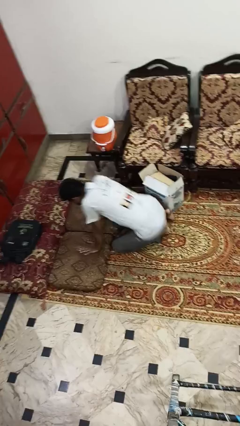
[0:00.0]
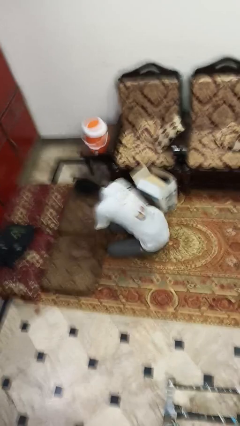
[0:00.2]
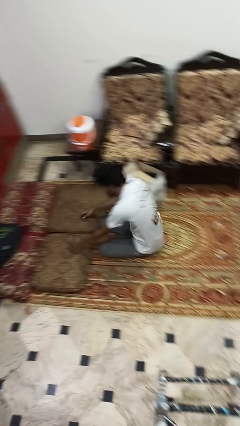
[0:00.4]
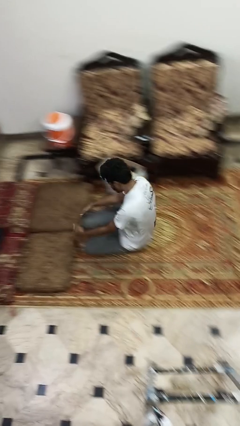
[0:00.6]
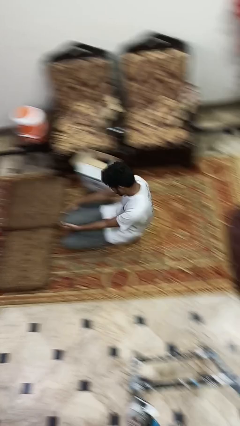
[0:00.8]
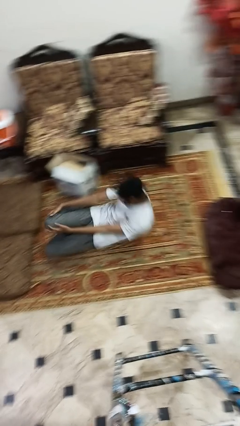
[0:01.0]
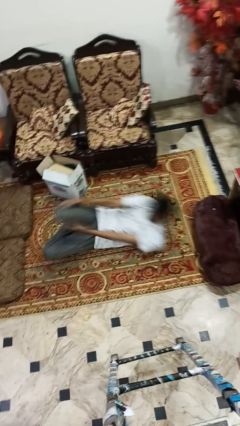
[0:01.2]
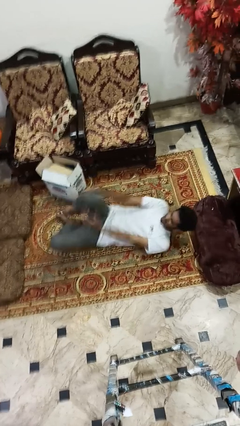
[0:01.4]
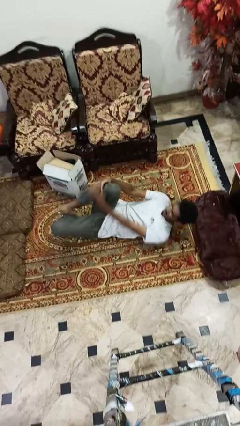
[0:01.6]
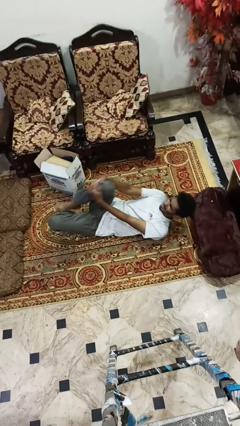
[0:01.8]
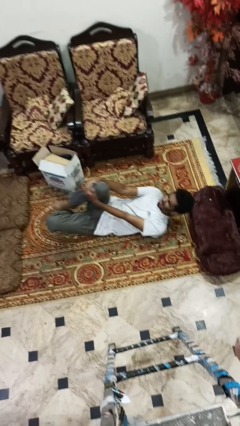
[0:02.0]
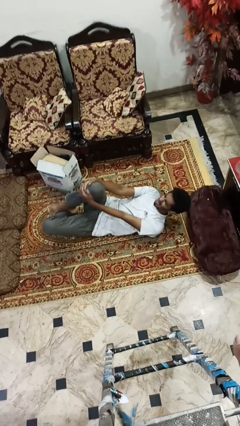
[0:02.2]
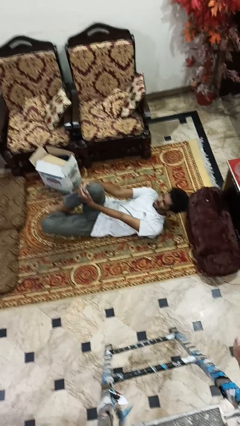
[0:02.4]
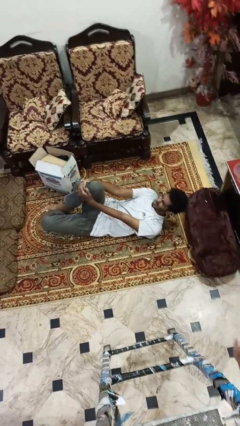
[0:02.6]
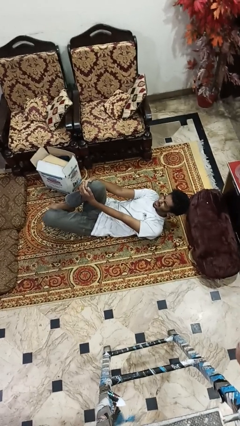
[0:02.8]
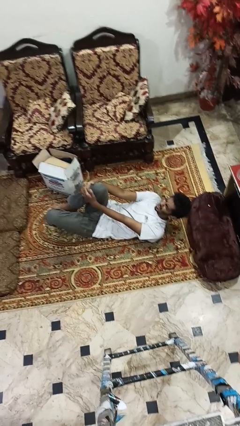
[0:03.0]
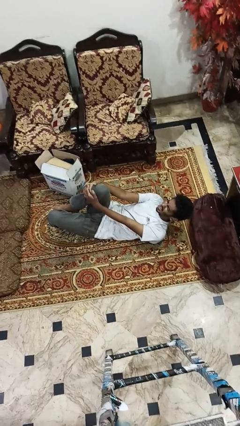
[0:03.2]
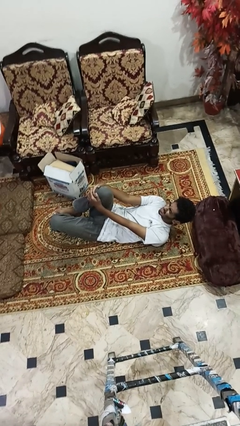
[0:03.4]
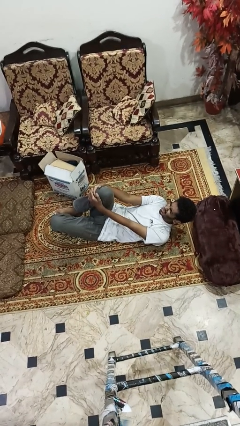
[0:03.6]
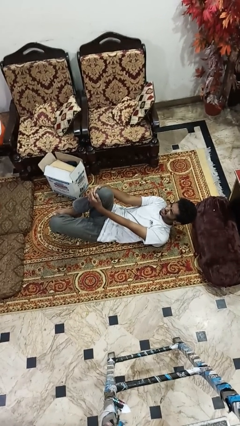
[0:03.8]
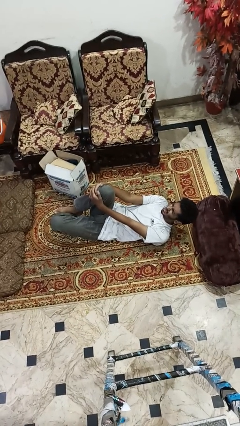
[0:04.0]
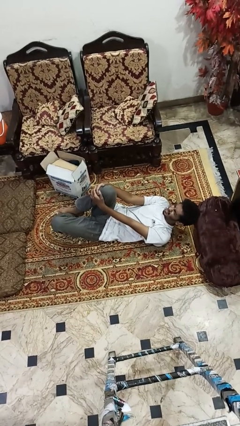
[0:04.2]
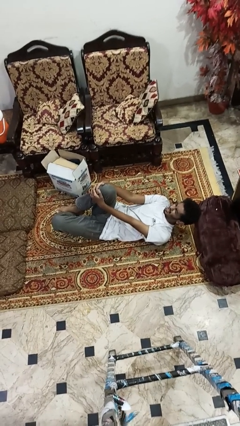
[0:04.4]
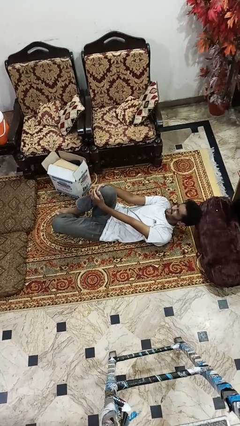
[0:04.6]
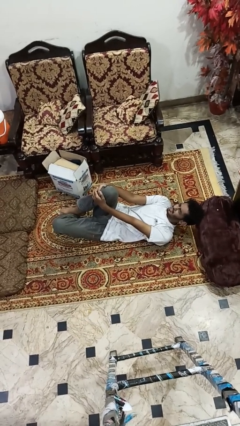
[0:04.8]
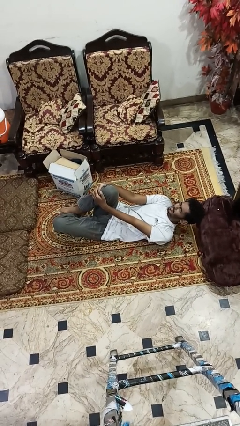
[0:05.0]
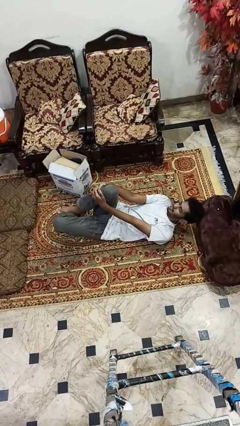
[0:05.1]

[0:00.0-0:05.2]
person lies down on floor

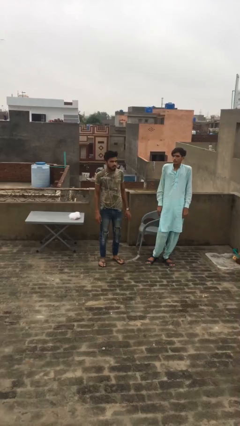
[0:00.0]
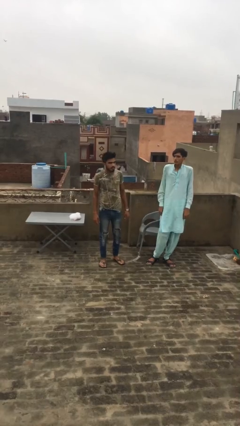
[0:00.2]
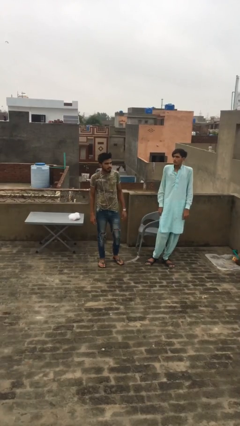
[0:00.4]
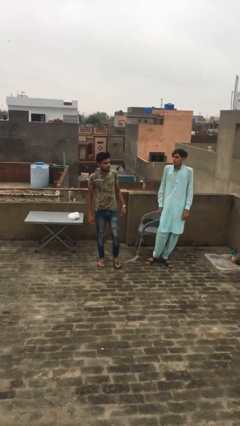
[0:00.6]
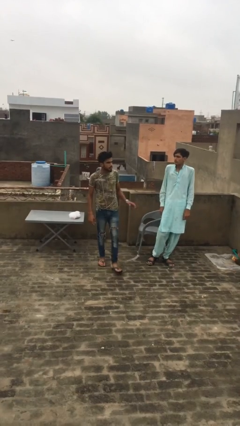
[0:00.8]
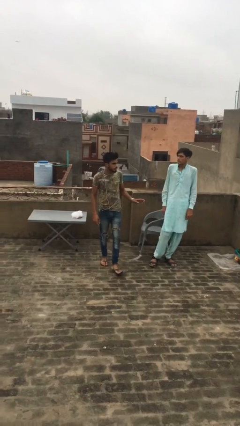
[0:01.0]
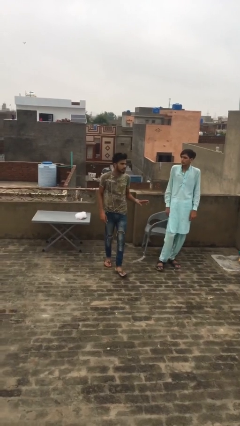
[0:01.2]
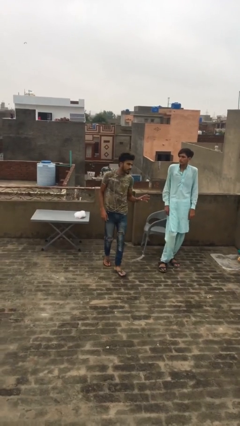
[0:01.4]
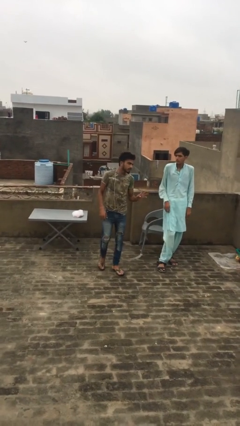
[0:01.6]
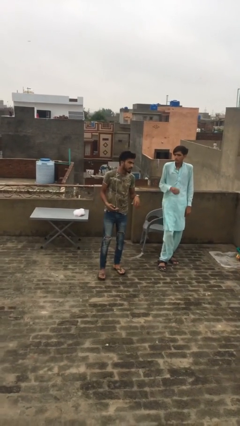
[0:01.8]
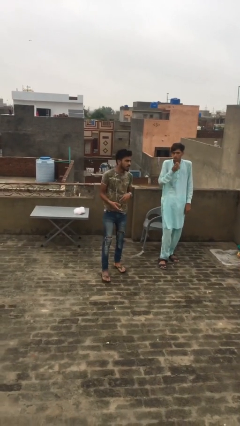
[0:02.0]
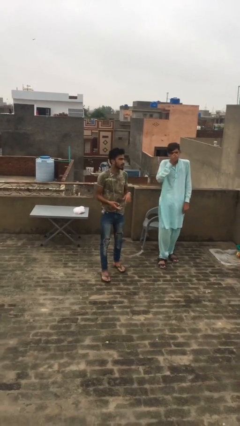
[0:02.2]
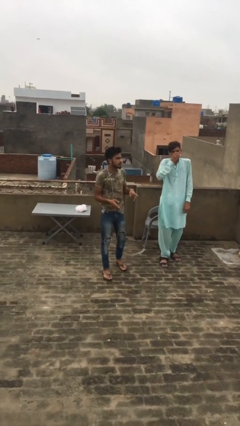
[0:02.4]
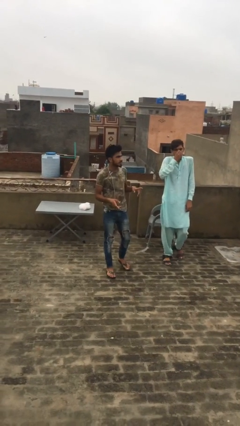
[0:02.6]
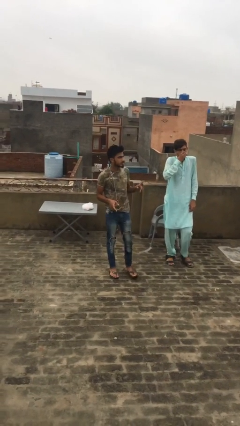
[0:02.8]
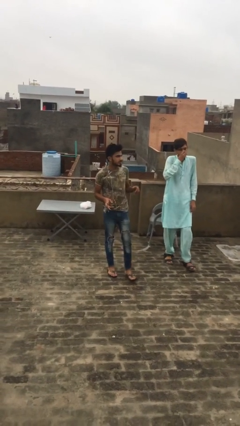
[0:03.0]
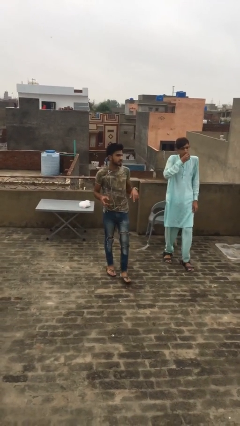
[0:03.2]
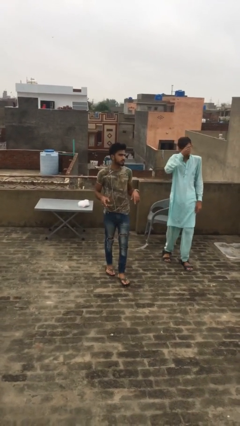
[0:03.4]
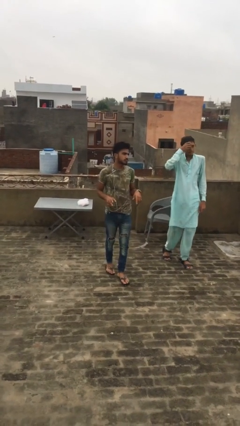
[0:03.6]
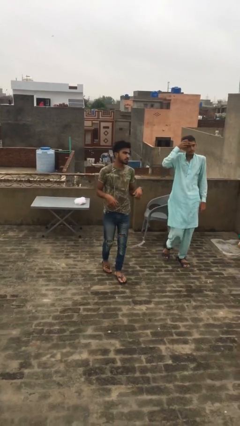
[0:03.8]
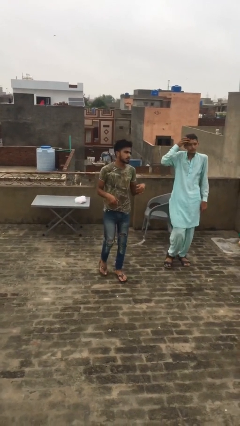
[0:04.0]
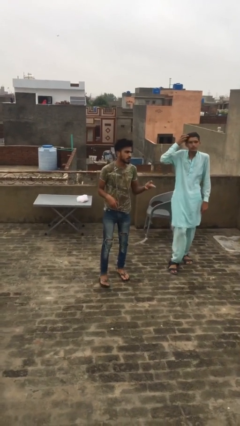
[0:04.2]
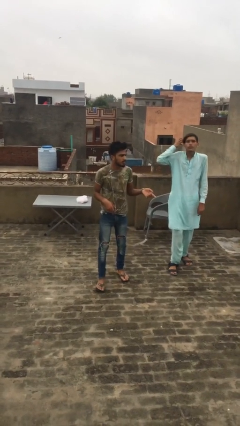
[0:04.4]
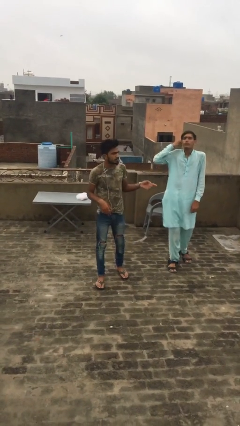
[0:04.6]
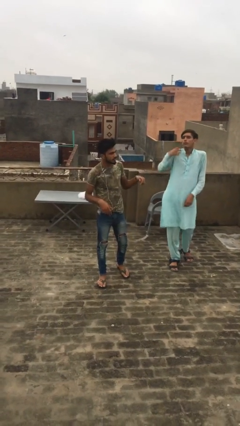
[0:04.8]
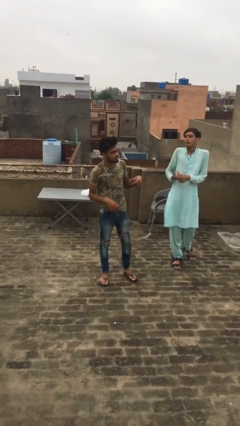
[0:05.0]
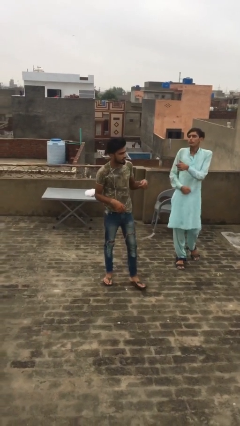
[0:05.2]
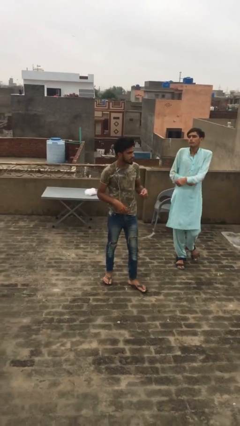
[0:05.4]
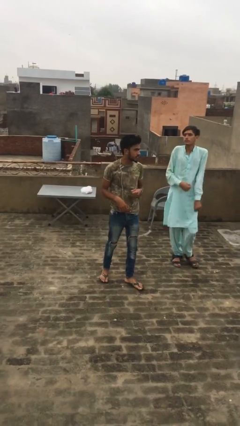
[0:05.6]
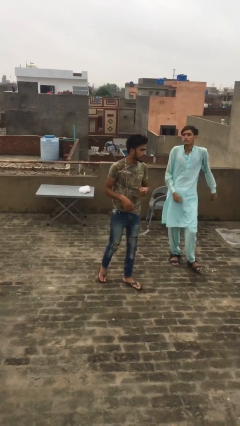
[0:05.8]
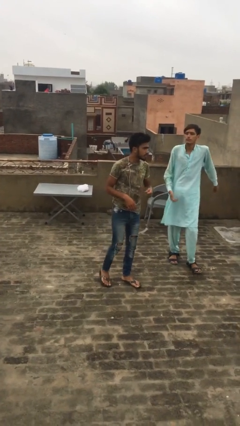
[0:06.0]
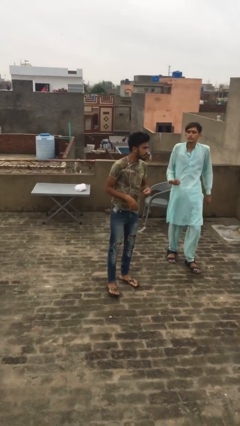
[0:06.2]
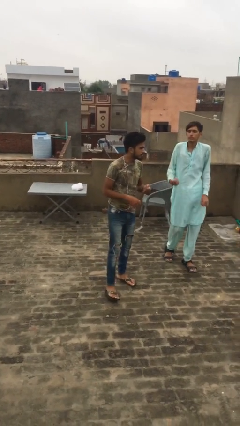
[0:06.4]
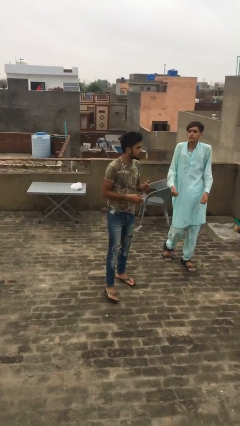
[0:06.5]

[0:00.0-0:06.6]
person talks to person

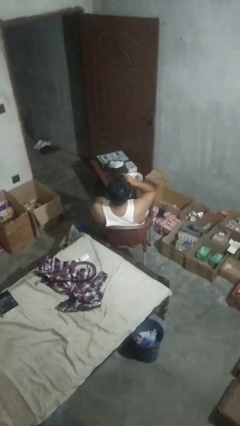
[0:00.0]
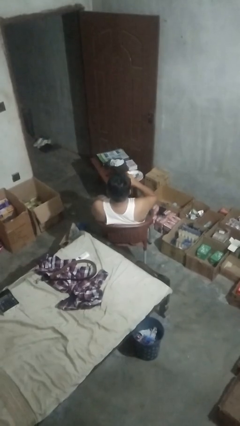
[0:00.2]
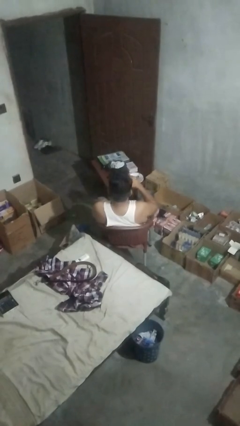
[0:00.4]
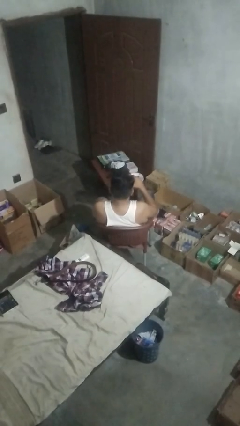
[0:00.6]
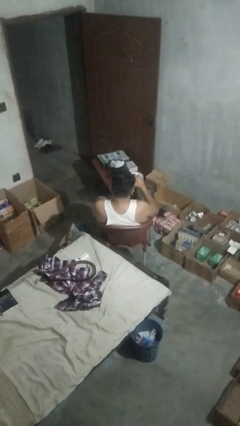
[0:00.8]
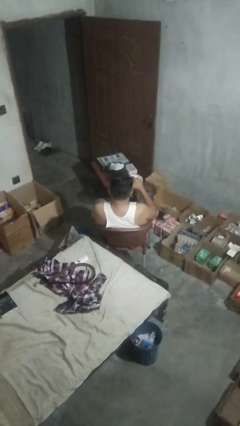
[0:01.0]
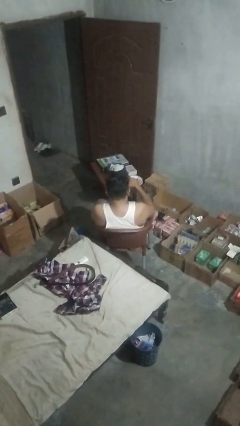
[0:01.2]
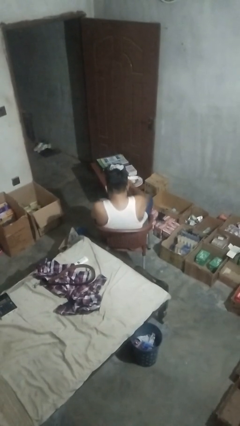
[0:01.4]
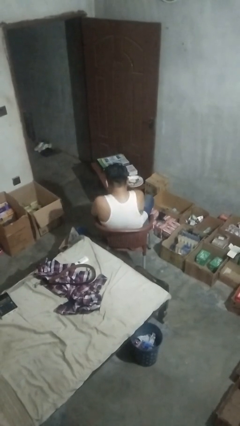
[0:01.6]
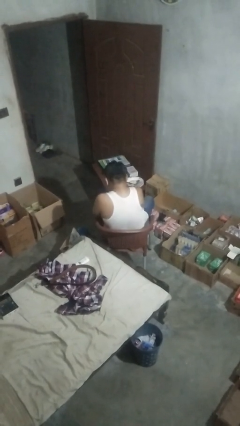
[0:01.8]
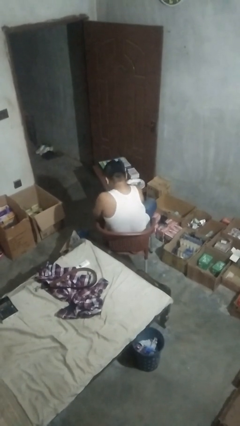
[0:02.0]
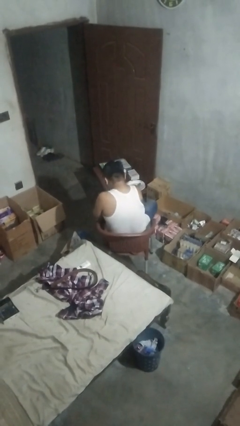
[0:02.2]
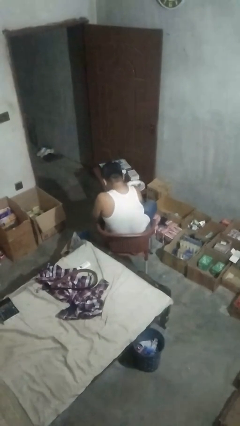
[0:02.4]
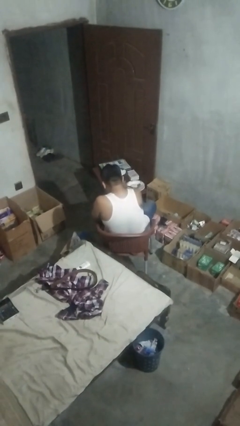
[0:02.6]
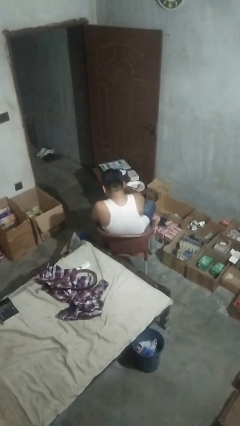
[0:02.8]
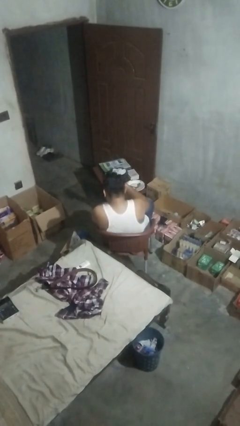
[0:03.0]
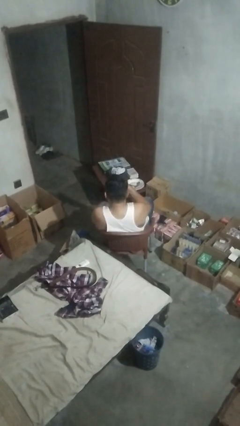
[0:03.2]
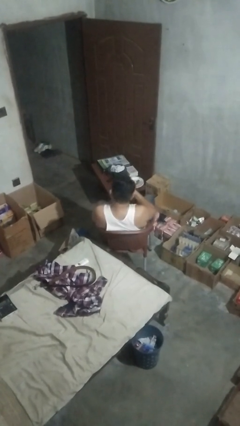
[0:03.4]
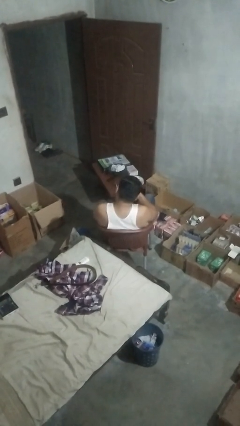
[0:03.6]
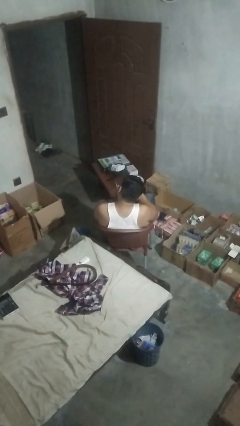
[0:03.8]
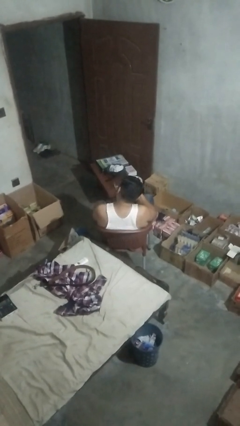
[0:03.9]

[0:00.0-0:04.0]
person puts down object on table

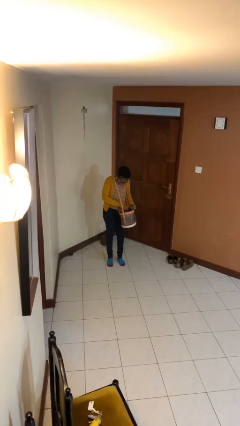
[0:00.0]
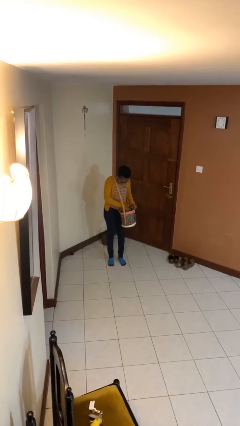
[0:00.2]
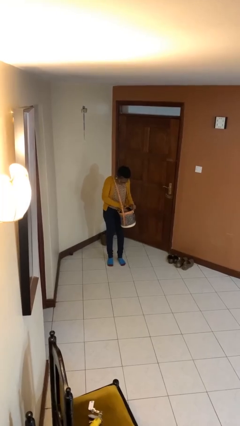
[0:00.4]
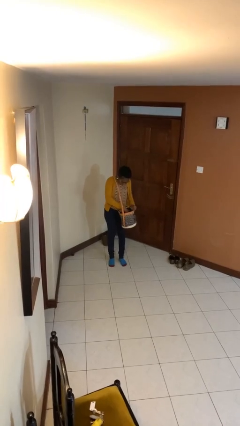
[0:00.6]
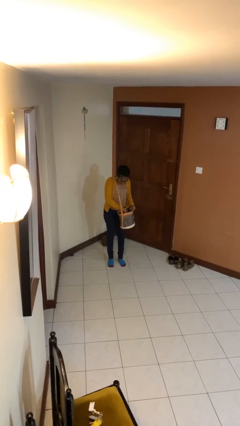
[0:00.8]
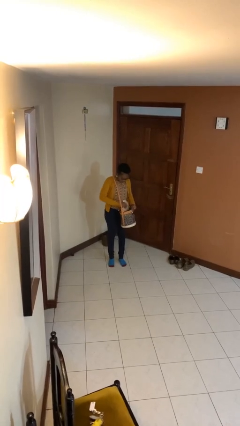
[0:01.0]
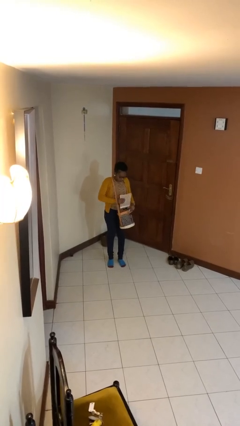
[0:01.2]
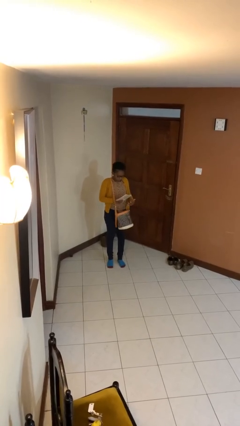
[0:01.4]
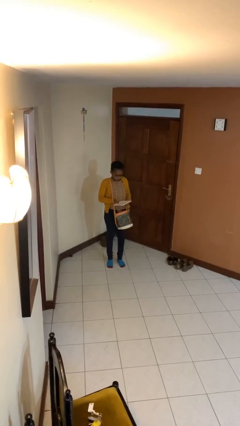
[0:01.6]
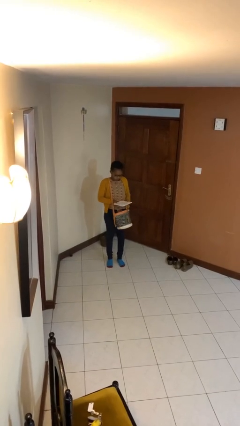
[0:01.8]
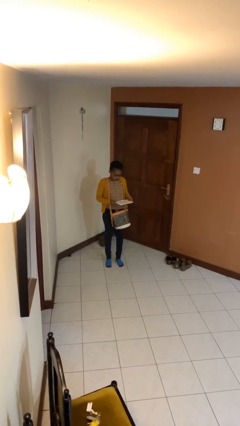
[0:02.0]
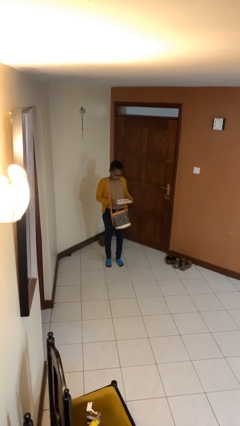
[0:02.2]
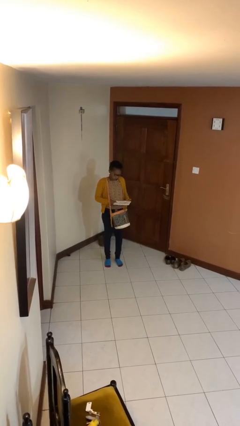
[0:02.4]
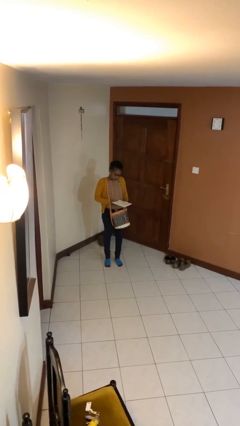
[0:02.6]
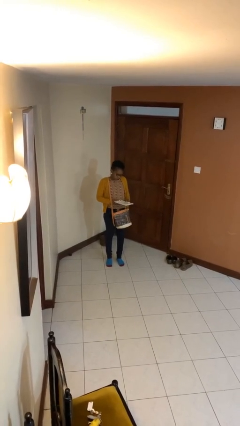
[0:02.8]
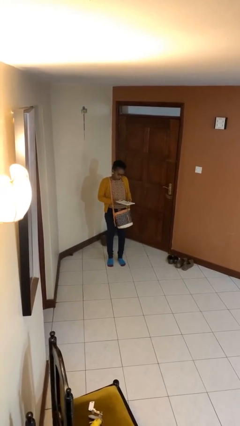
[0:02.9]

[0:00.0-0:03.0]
person takes object from purse
